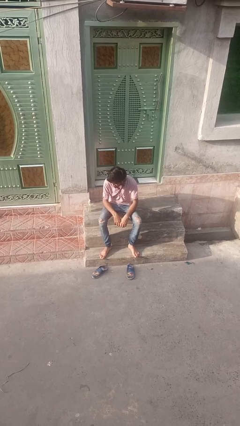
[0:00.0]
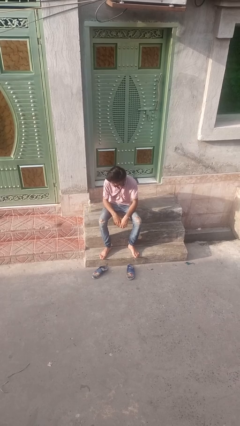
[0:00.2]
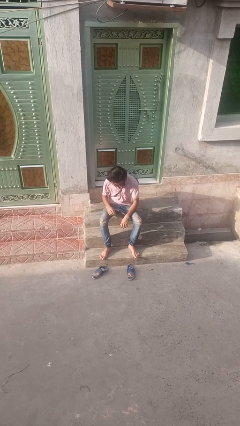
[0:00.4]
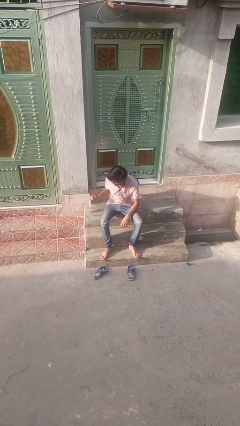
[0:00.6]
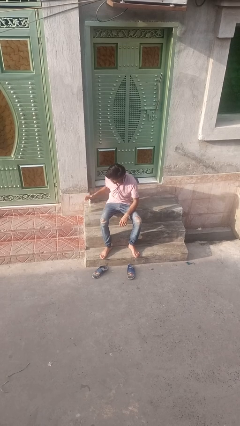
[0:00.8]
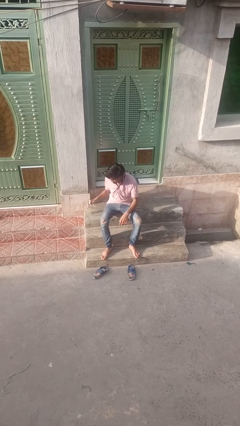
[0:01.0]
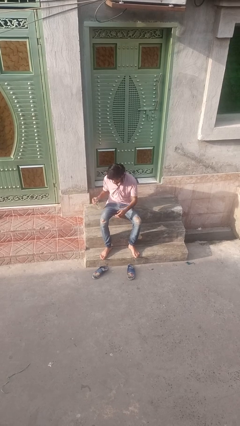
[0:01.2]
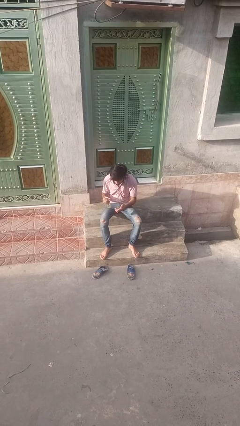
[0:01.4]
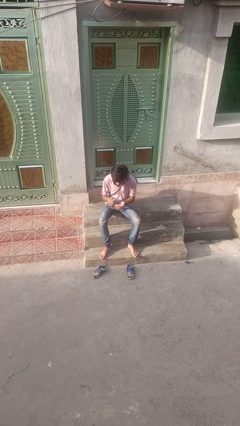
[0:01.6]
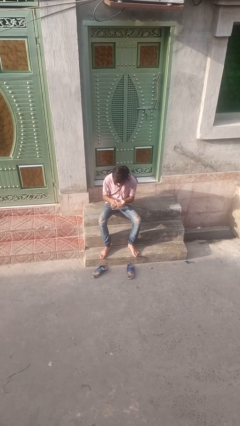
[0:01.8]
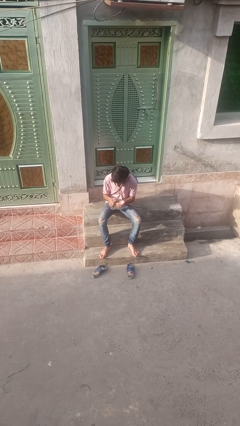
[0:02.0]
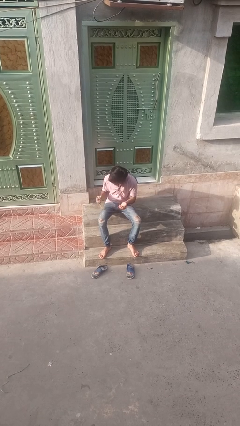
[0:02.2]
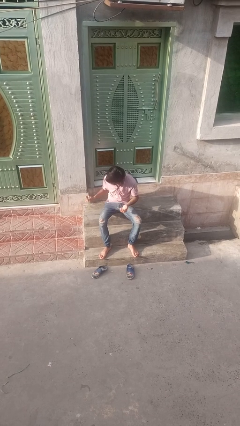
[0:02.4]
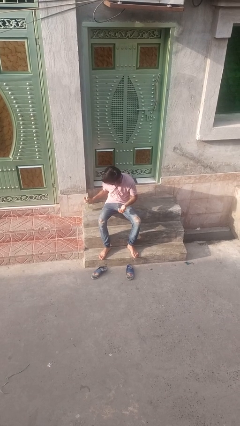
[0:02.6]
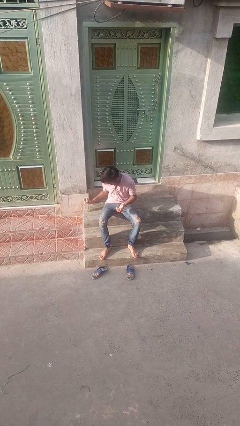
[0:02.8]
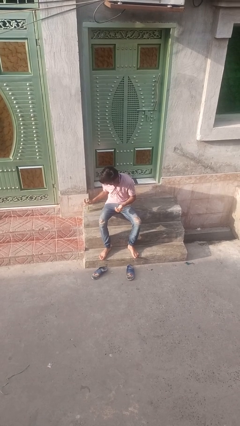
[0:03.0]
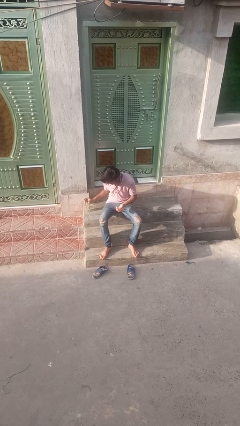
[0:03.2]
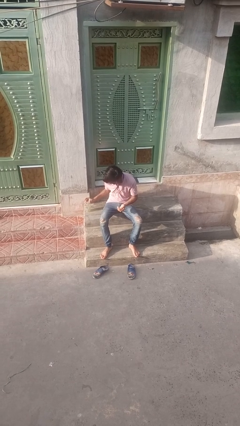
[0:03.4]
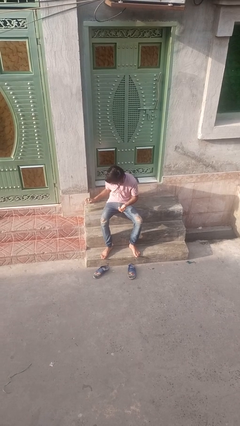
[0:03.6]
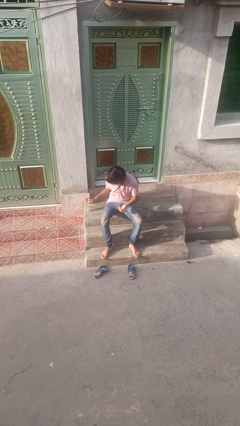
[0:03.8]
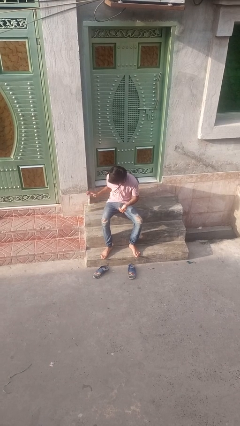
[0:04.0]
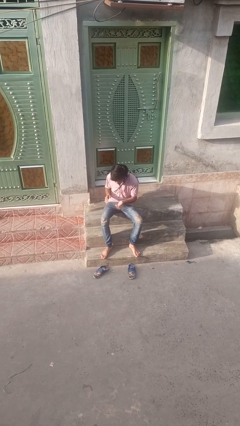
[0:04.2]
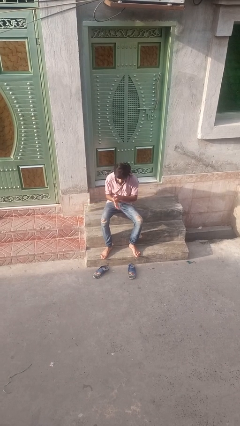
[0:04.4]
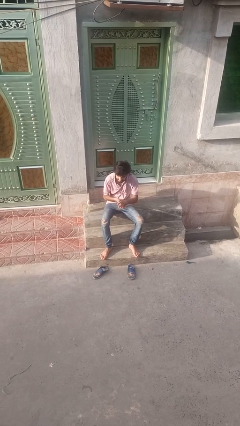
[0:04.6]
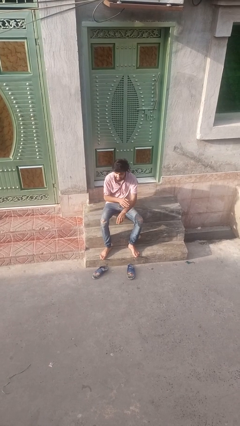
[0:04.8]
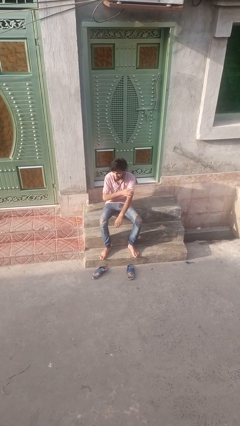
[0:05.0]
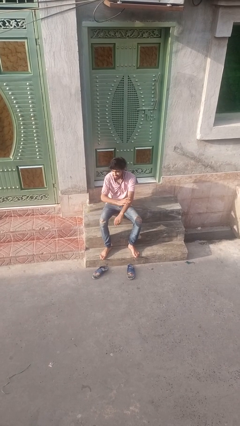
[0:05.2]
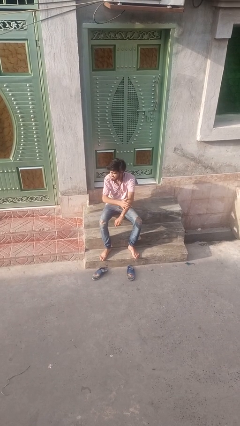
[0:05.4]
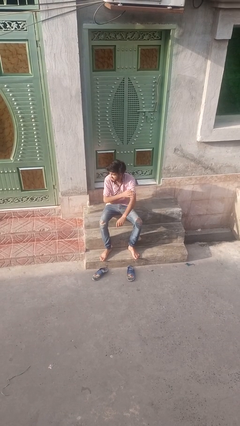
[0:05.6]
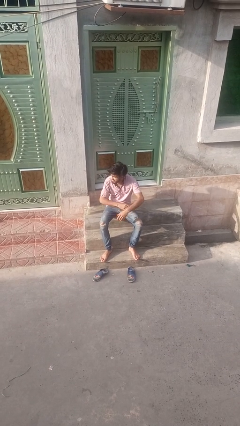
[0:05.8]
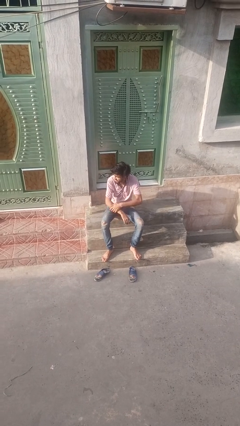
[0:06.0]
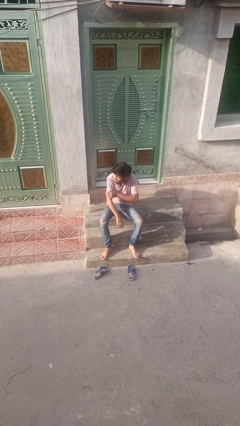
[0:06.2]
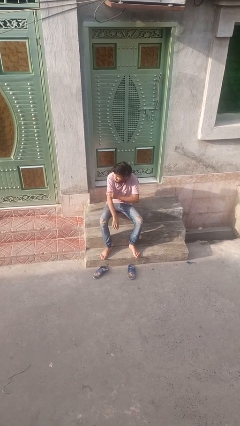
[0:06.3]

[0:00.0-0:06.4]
person applies facial moisturizer

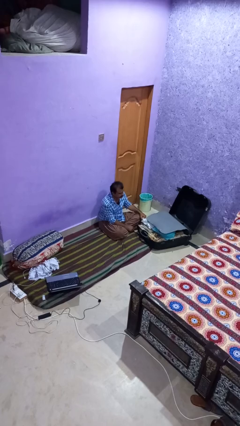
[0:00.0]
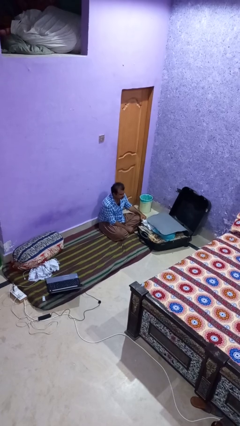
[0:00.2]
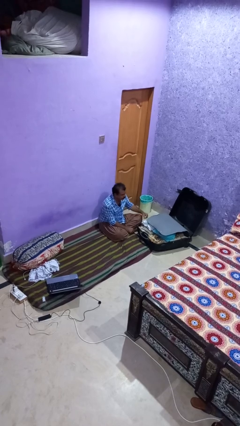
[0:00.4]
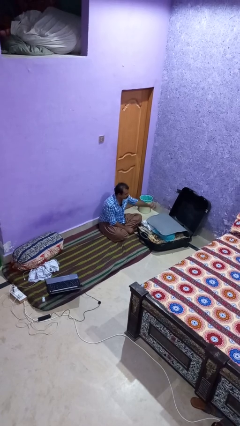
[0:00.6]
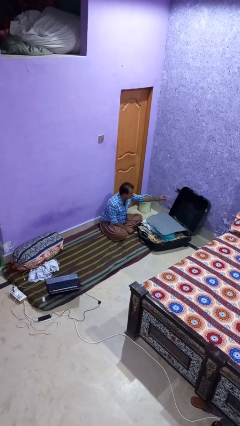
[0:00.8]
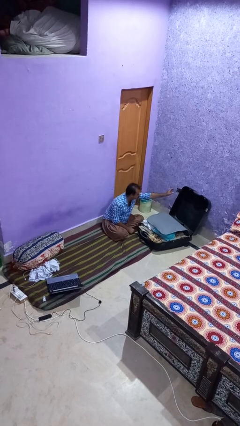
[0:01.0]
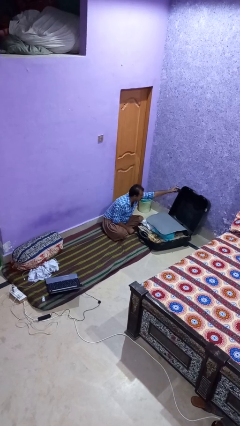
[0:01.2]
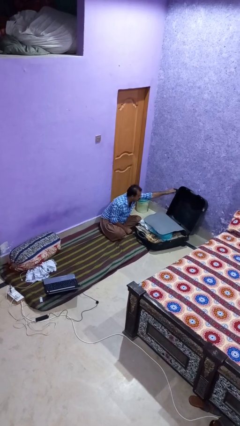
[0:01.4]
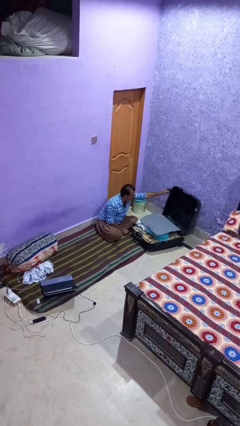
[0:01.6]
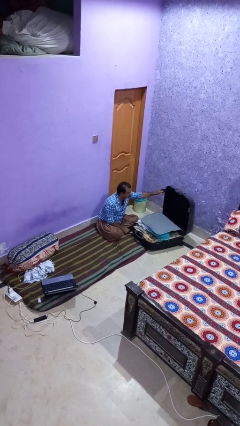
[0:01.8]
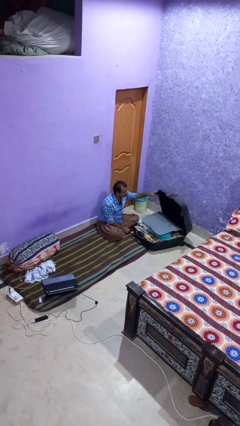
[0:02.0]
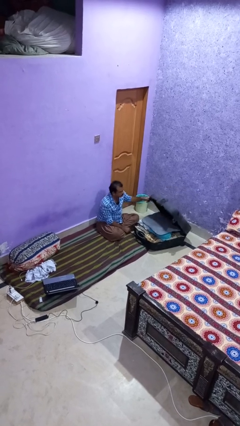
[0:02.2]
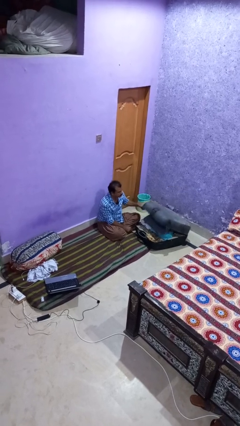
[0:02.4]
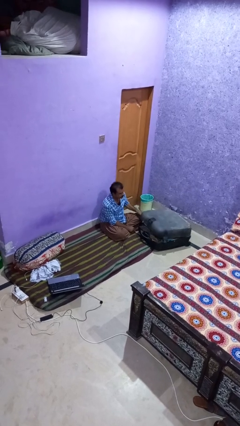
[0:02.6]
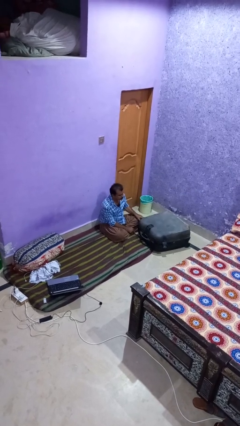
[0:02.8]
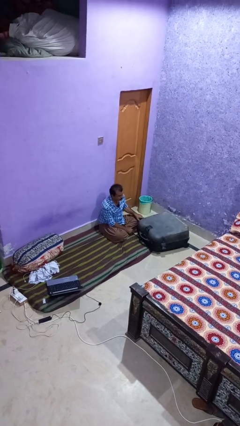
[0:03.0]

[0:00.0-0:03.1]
person closes suitcase

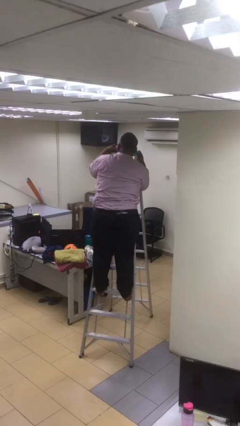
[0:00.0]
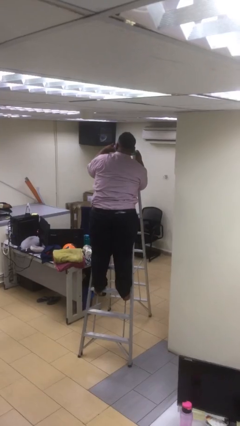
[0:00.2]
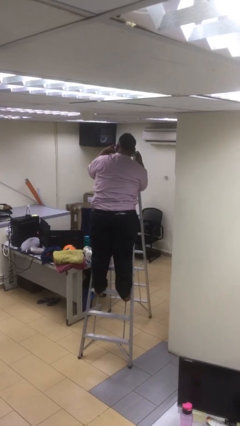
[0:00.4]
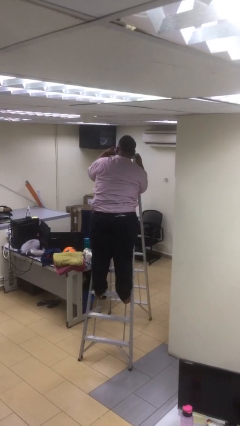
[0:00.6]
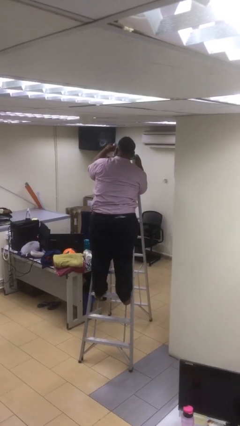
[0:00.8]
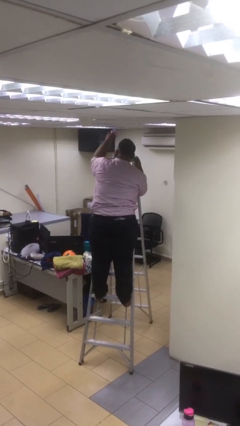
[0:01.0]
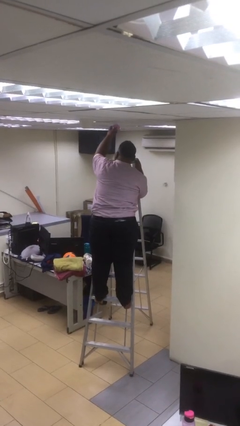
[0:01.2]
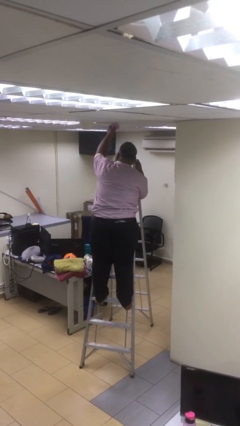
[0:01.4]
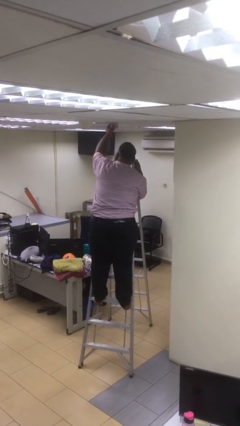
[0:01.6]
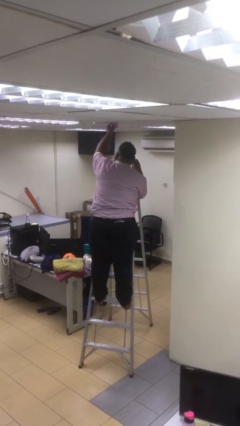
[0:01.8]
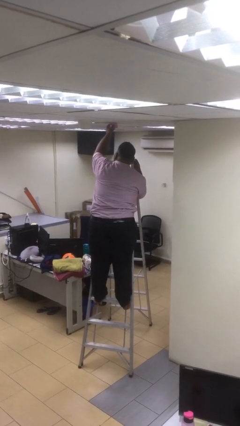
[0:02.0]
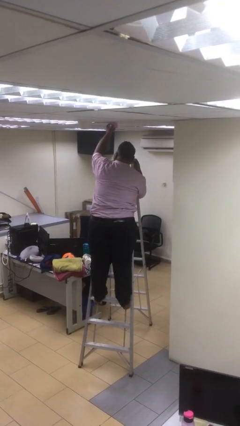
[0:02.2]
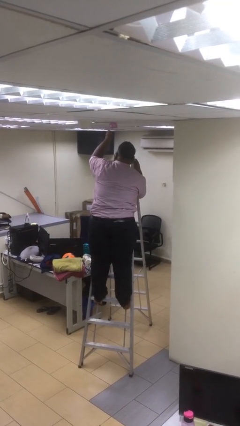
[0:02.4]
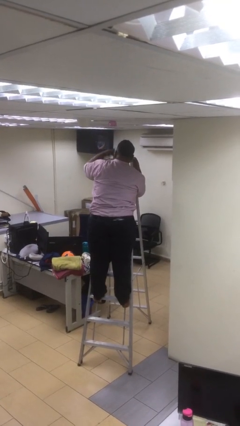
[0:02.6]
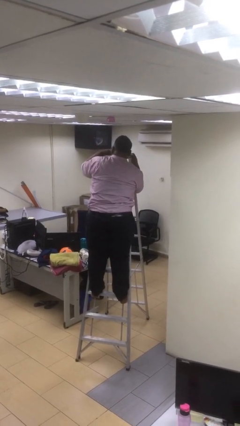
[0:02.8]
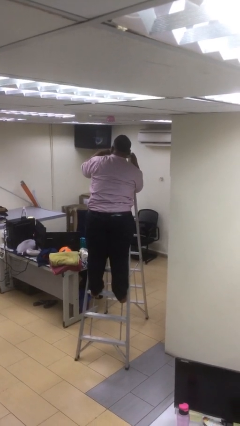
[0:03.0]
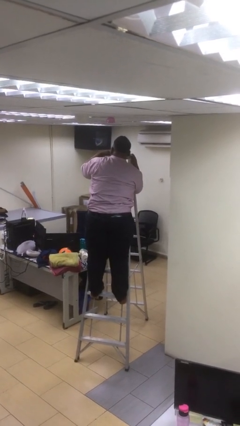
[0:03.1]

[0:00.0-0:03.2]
person puts up smoke detector

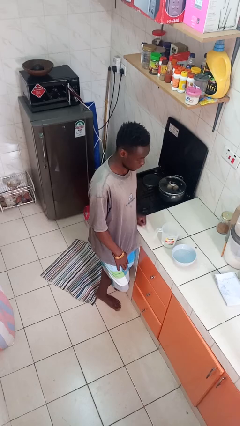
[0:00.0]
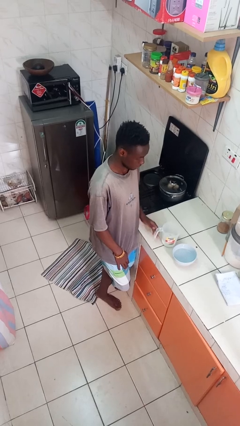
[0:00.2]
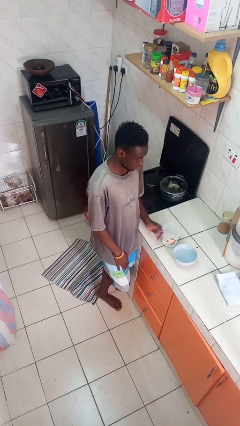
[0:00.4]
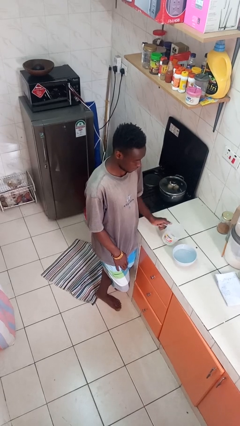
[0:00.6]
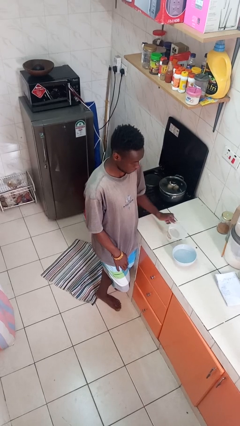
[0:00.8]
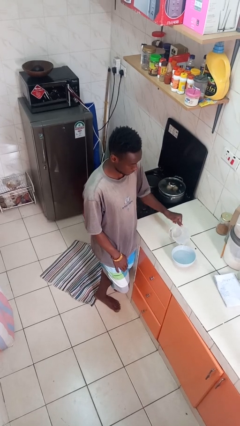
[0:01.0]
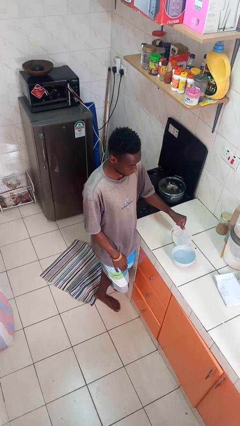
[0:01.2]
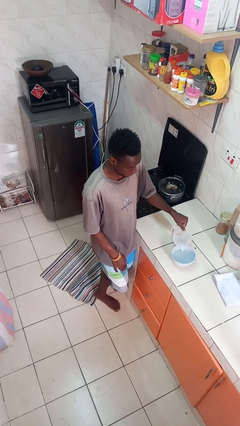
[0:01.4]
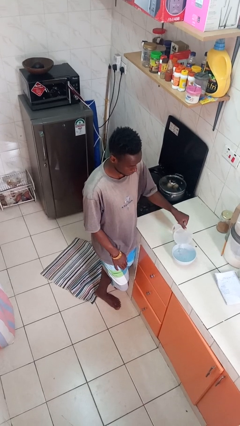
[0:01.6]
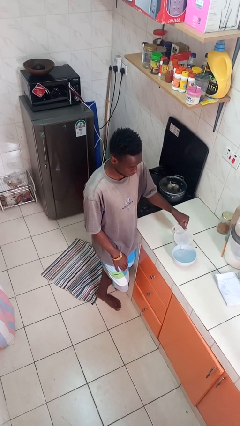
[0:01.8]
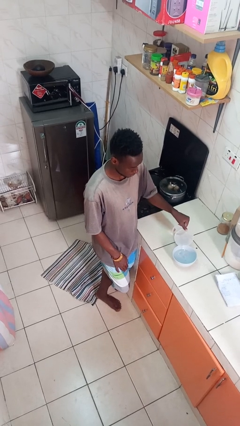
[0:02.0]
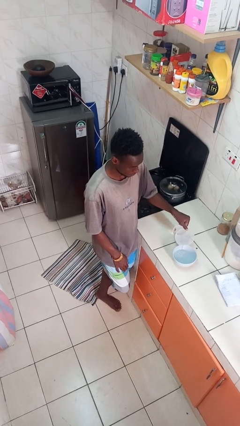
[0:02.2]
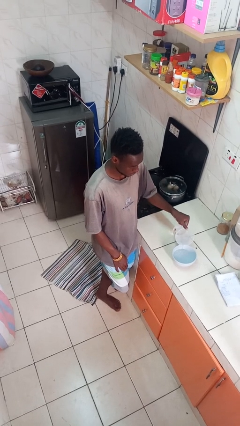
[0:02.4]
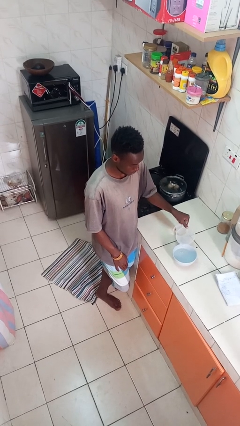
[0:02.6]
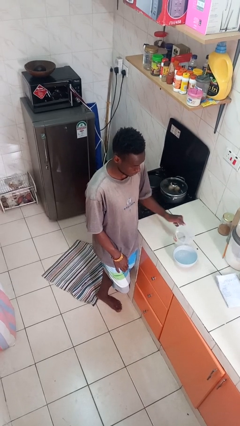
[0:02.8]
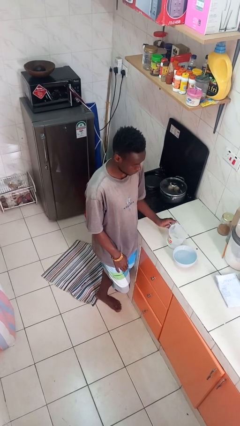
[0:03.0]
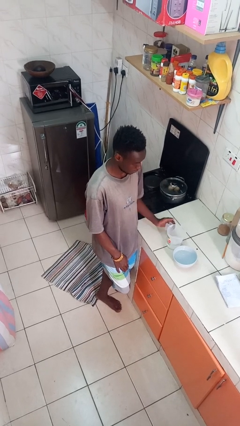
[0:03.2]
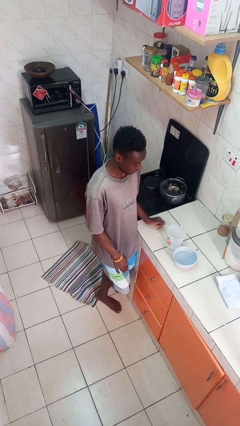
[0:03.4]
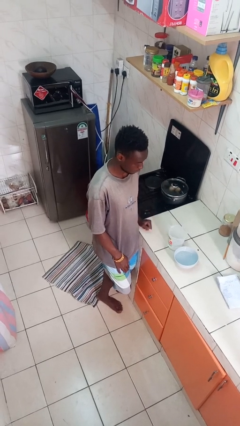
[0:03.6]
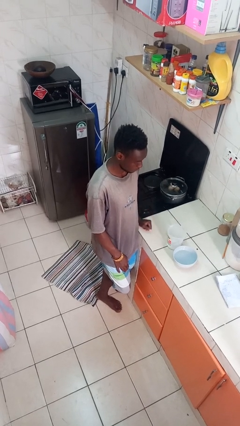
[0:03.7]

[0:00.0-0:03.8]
person pours into bowl

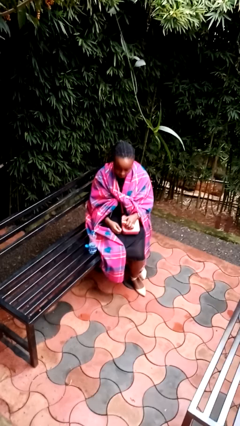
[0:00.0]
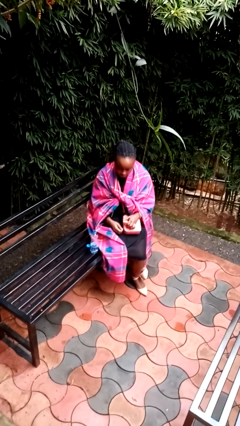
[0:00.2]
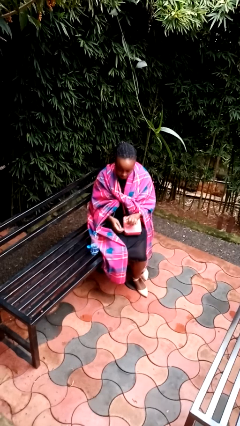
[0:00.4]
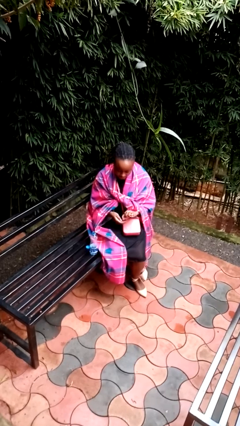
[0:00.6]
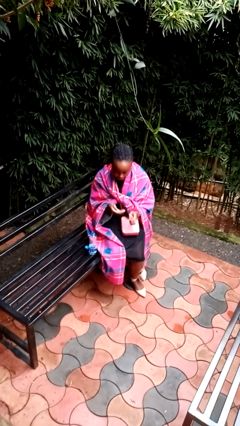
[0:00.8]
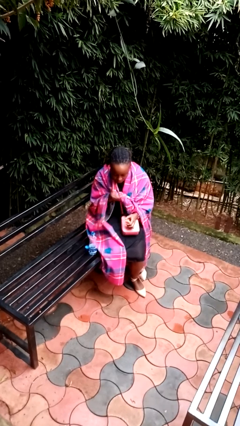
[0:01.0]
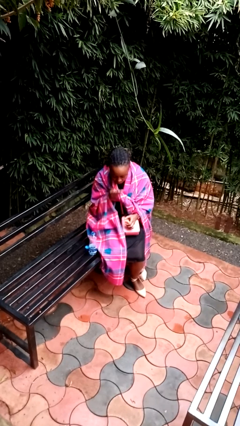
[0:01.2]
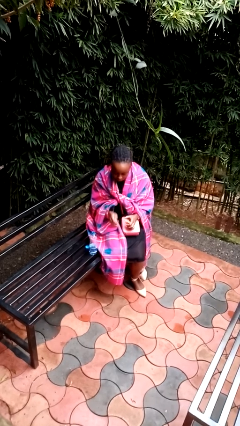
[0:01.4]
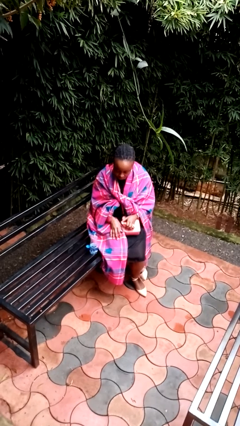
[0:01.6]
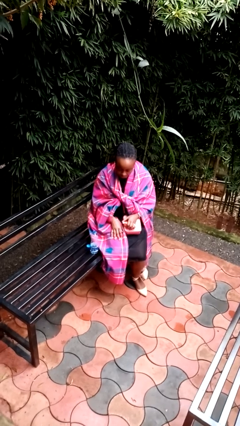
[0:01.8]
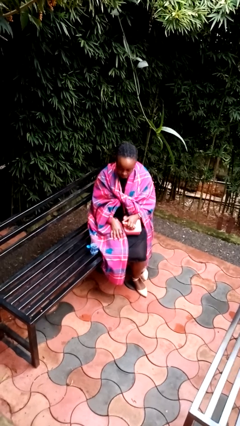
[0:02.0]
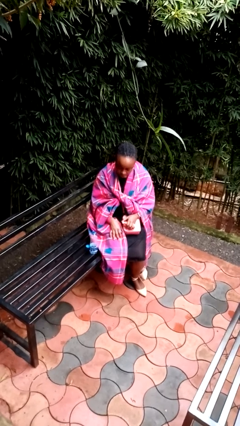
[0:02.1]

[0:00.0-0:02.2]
person takes medicine pills
